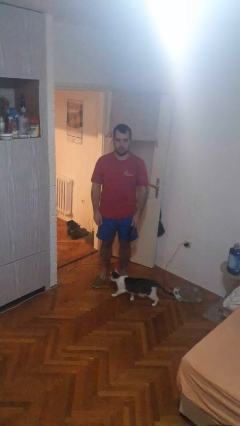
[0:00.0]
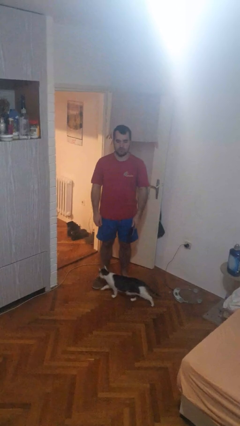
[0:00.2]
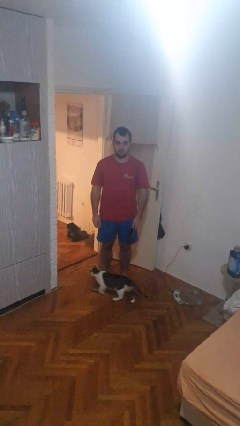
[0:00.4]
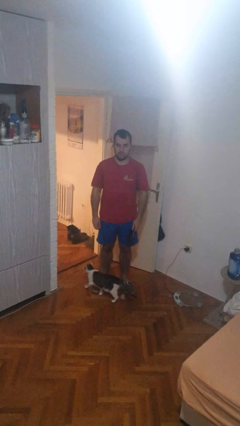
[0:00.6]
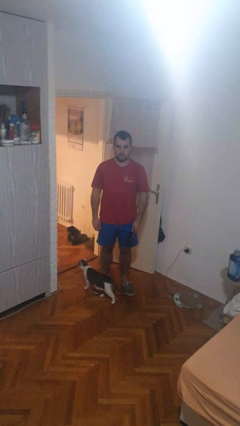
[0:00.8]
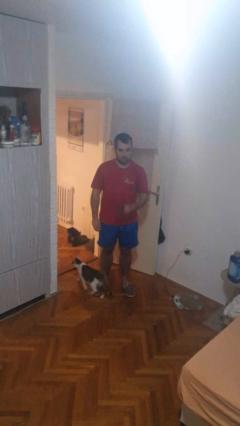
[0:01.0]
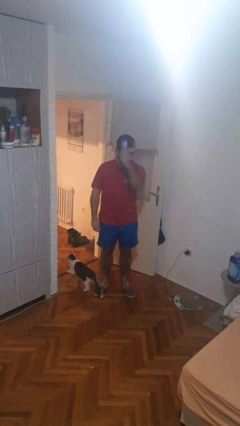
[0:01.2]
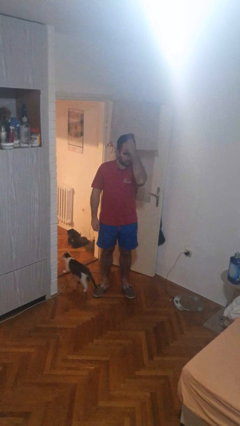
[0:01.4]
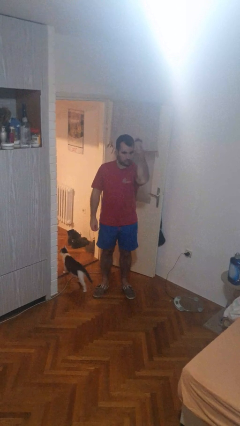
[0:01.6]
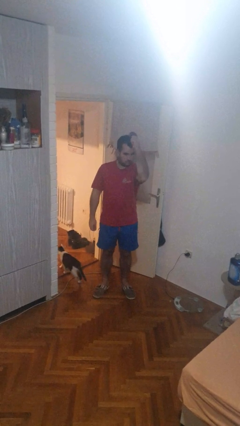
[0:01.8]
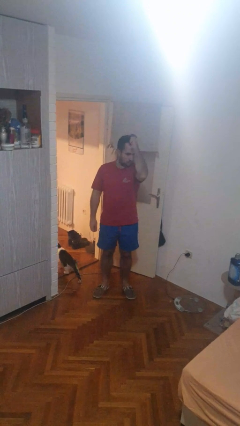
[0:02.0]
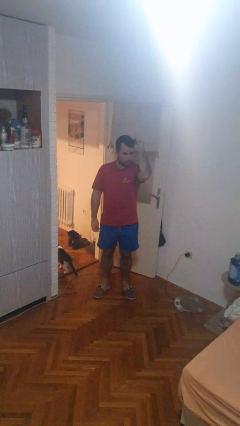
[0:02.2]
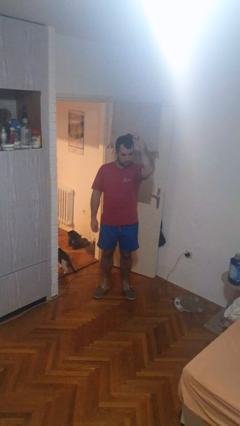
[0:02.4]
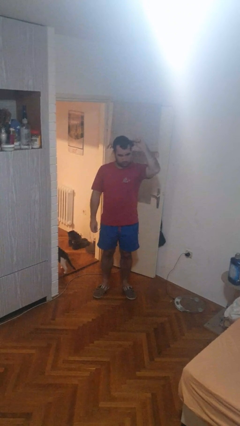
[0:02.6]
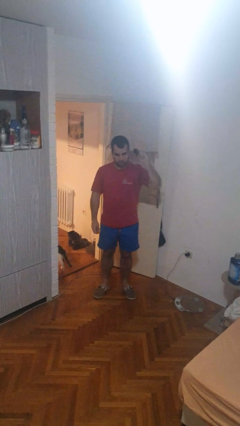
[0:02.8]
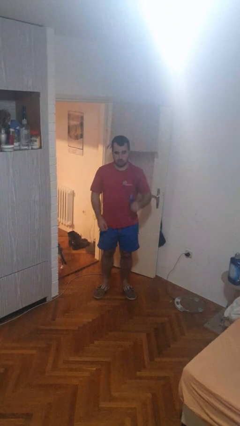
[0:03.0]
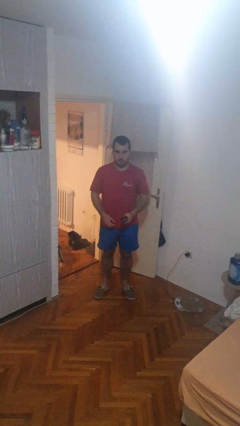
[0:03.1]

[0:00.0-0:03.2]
person brushes hair

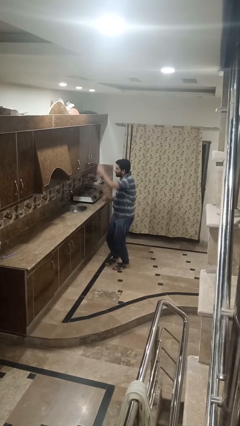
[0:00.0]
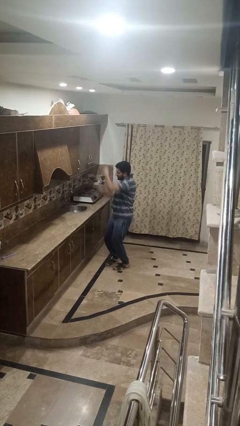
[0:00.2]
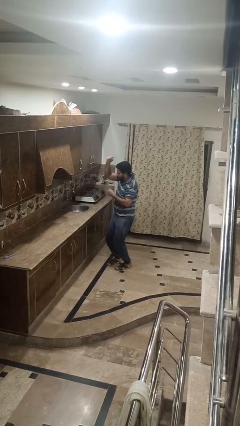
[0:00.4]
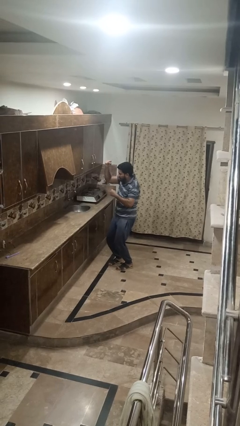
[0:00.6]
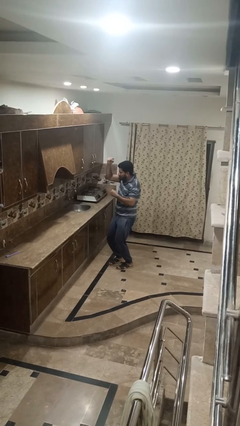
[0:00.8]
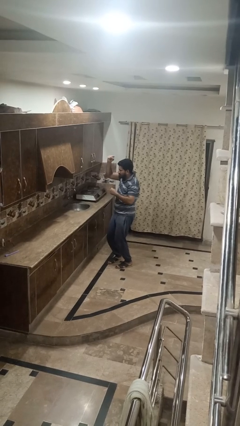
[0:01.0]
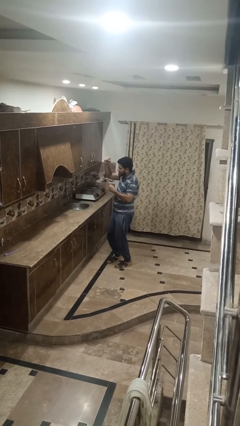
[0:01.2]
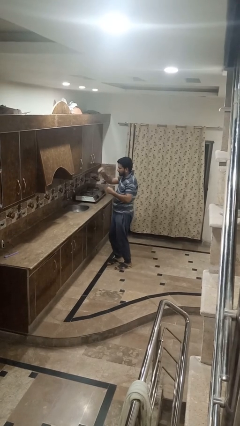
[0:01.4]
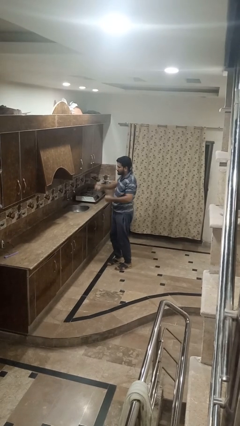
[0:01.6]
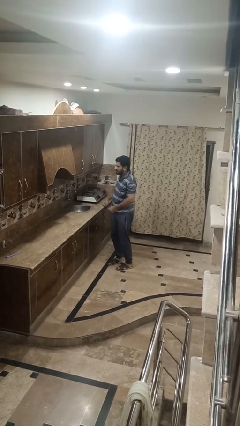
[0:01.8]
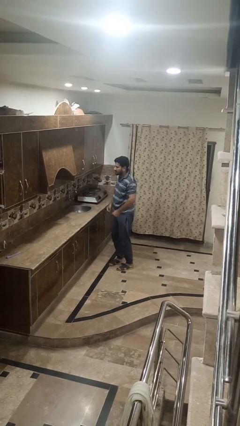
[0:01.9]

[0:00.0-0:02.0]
person punches

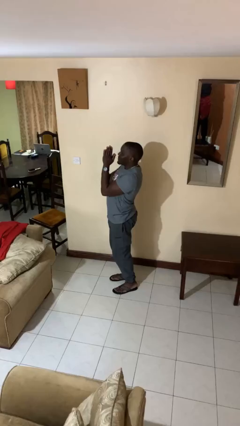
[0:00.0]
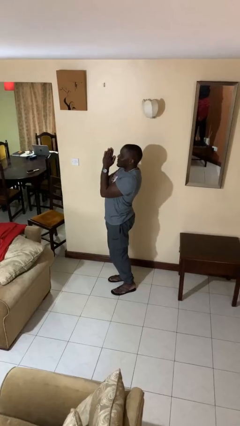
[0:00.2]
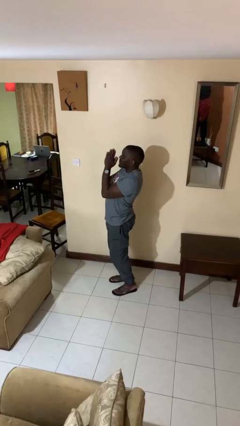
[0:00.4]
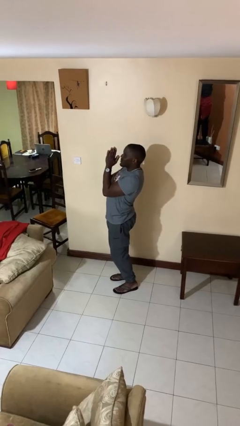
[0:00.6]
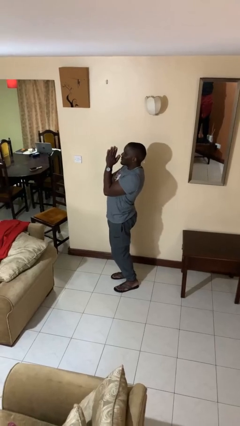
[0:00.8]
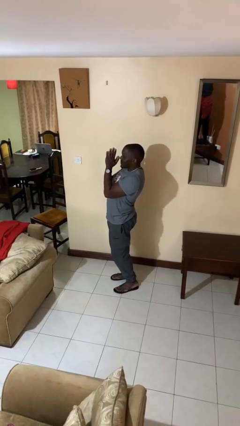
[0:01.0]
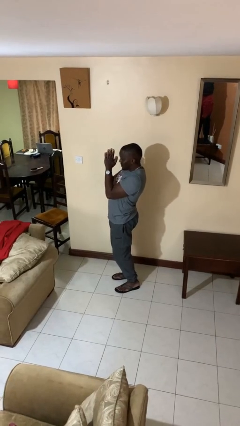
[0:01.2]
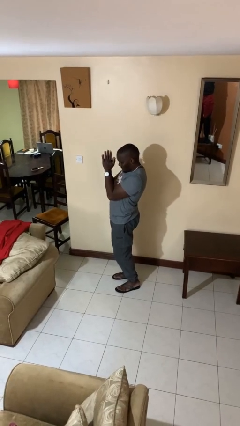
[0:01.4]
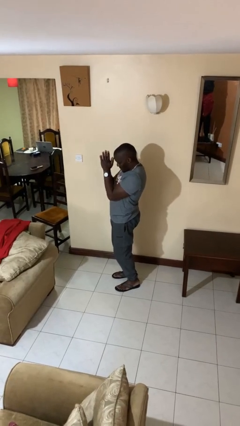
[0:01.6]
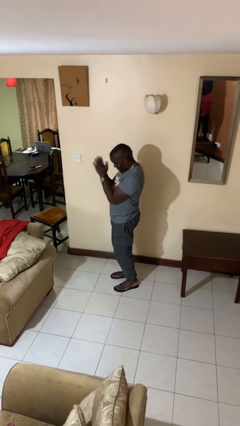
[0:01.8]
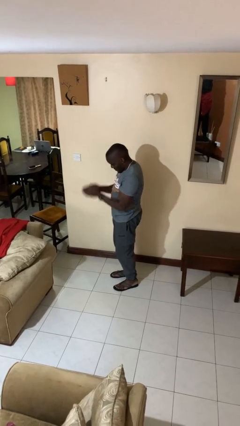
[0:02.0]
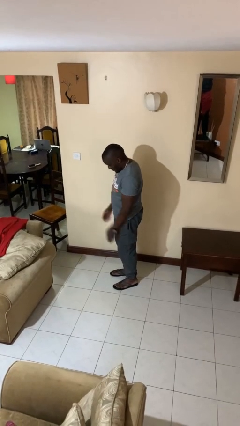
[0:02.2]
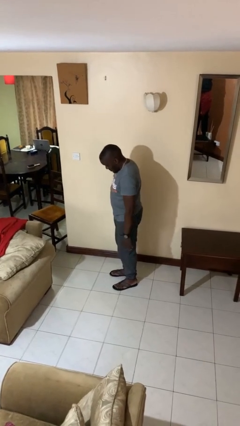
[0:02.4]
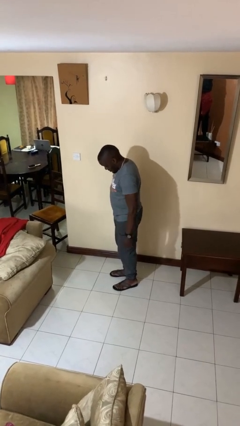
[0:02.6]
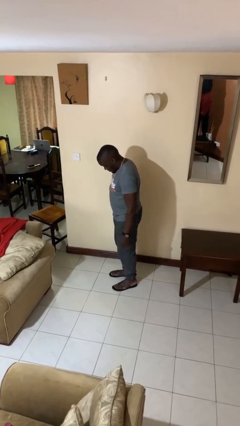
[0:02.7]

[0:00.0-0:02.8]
person prays

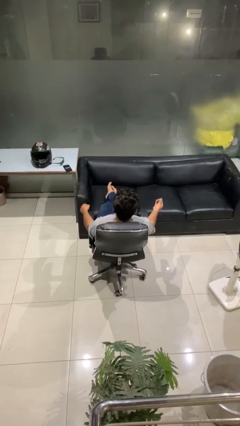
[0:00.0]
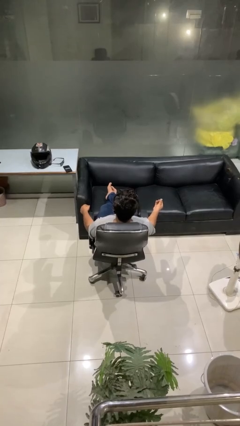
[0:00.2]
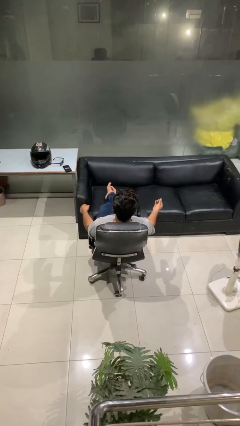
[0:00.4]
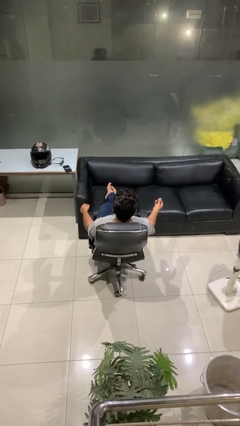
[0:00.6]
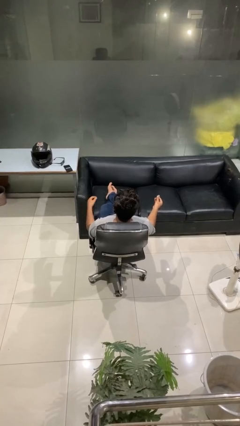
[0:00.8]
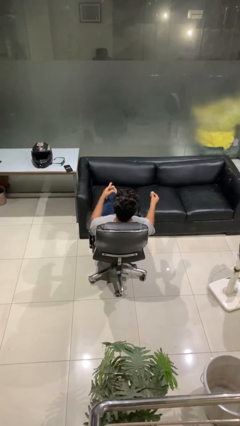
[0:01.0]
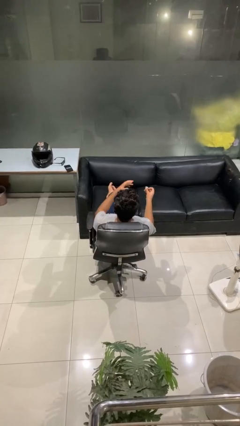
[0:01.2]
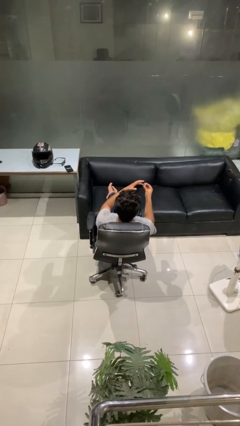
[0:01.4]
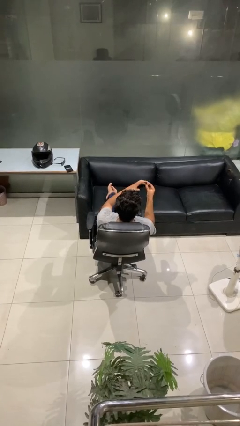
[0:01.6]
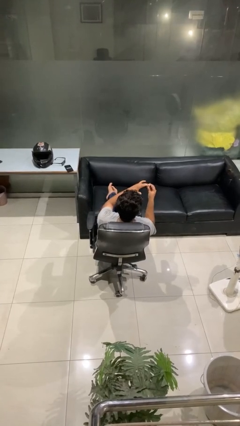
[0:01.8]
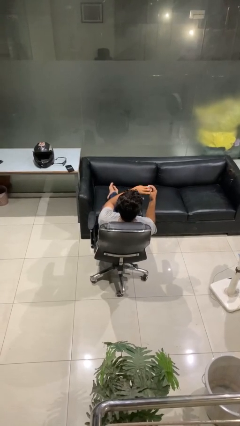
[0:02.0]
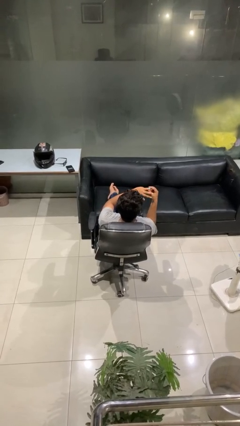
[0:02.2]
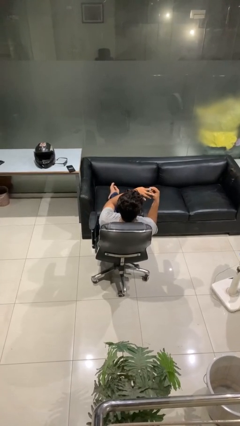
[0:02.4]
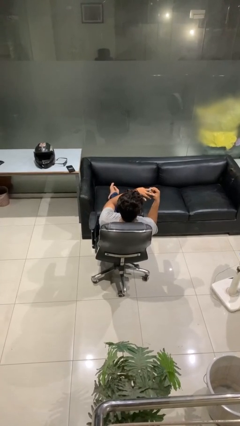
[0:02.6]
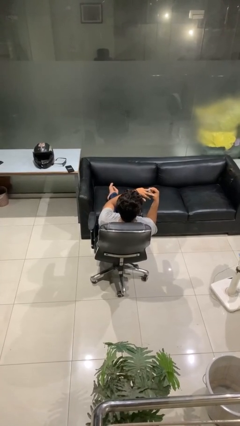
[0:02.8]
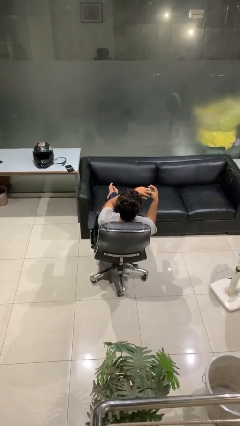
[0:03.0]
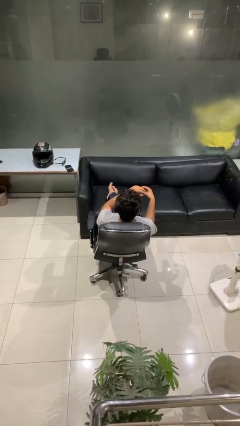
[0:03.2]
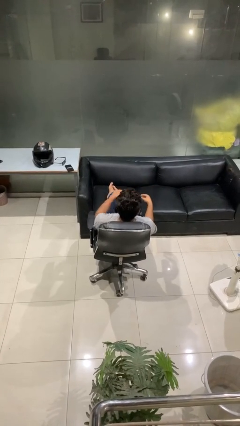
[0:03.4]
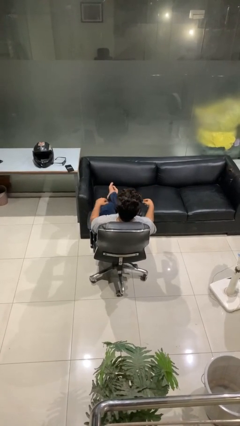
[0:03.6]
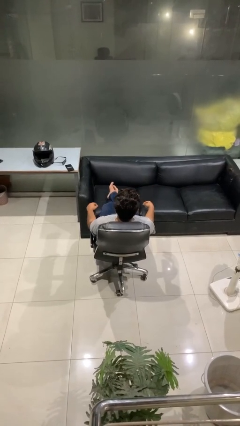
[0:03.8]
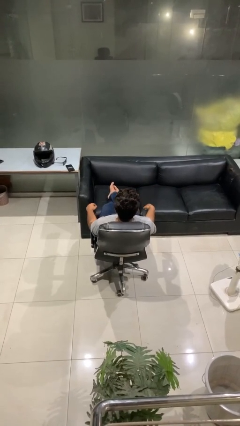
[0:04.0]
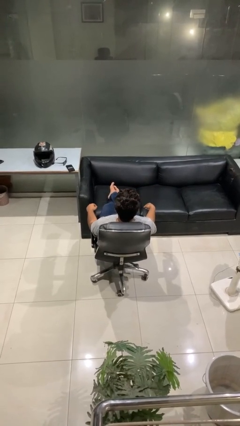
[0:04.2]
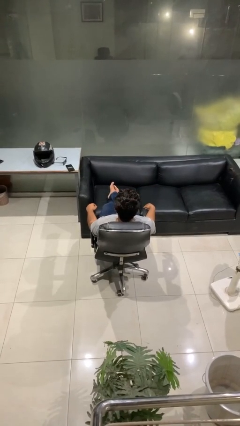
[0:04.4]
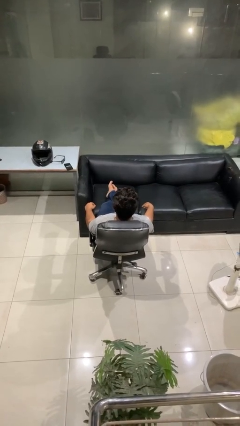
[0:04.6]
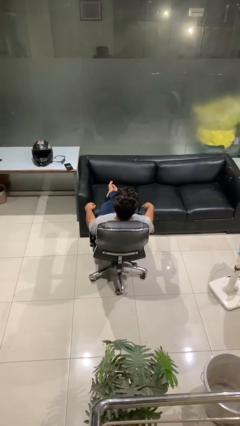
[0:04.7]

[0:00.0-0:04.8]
person puts on ring

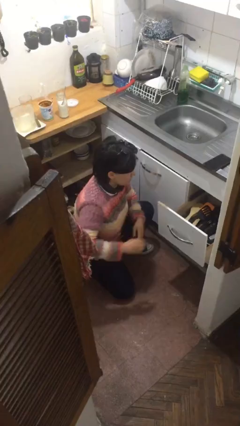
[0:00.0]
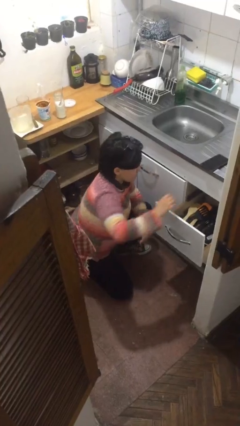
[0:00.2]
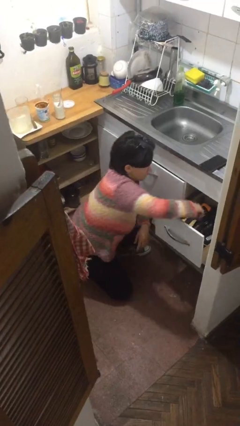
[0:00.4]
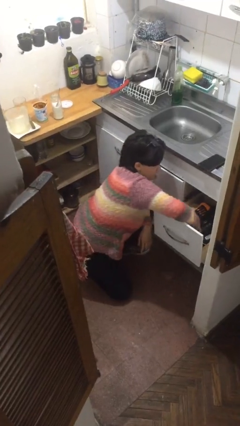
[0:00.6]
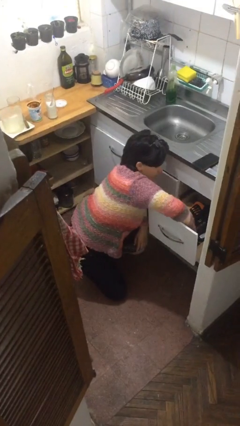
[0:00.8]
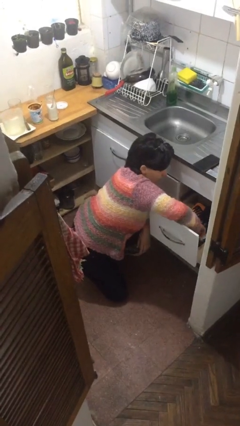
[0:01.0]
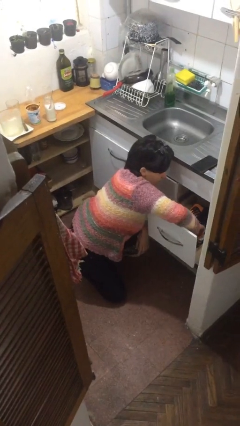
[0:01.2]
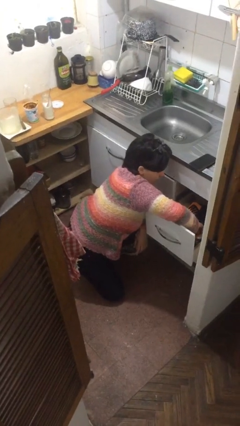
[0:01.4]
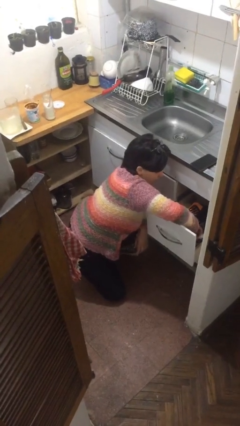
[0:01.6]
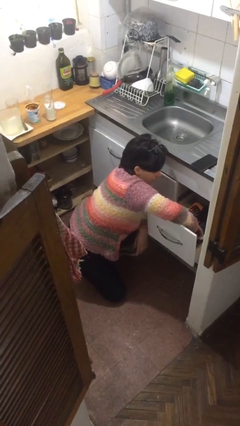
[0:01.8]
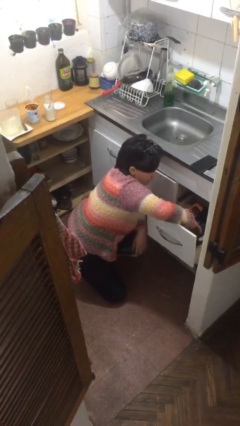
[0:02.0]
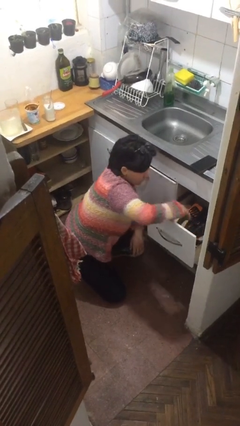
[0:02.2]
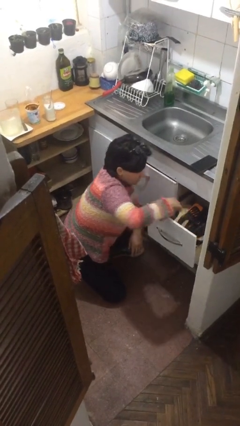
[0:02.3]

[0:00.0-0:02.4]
person searches in kitchen drawer

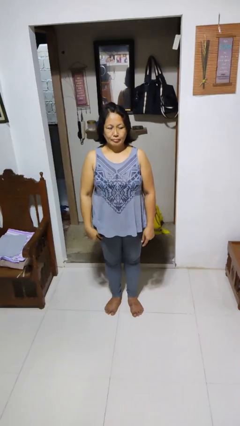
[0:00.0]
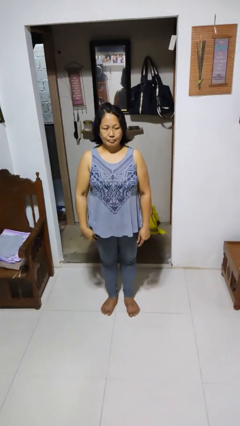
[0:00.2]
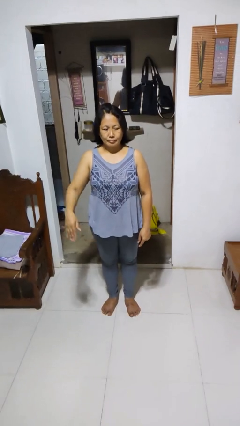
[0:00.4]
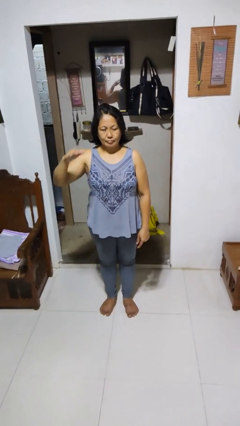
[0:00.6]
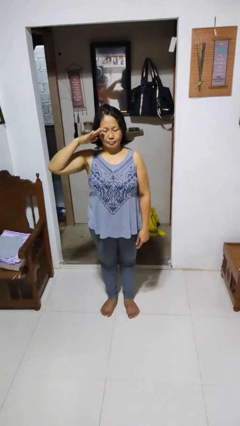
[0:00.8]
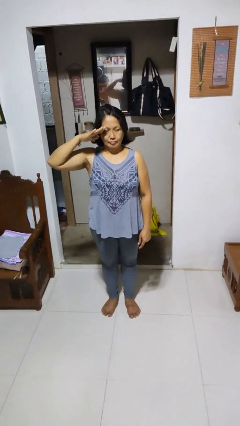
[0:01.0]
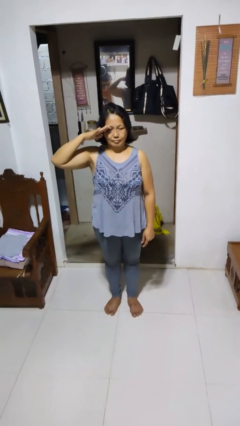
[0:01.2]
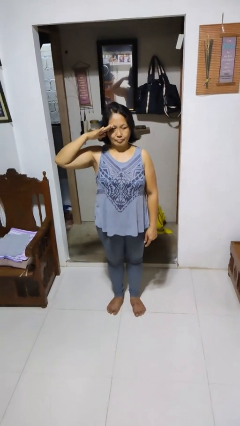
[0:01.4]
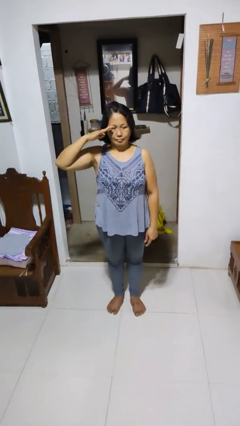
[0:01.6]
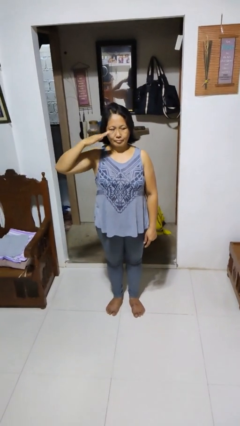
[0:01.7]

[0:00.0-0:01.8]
person salutes

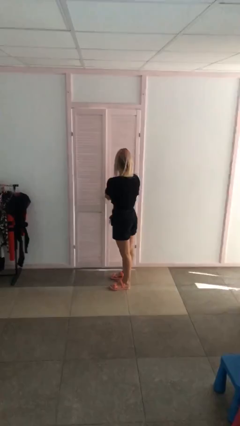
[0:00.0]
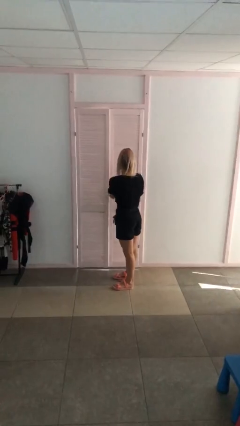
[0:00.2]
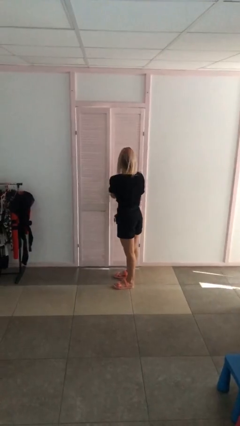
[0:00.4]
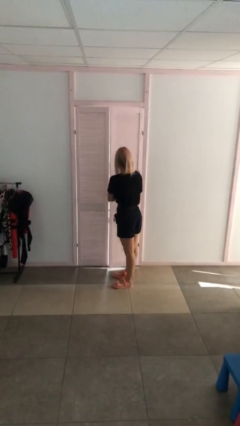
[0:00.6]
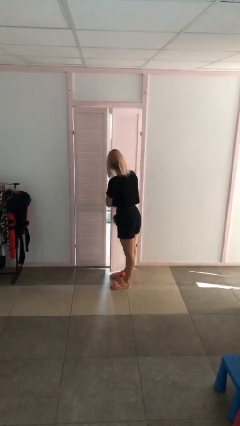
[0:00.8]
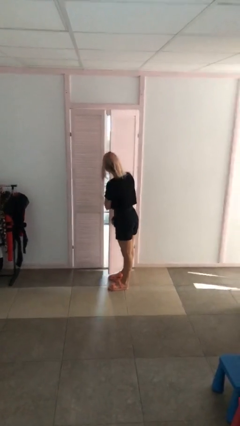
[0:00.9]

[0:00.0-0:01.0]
person opens facility door
